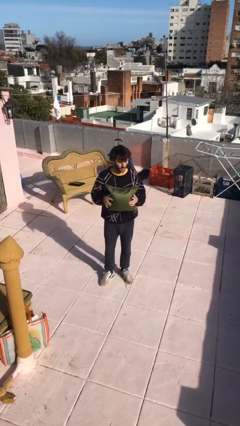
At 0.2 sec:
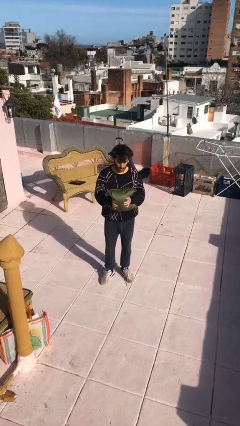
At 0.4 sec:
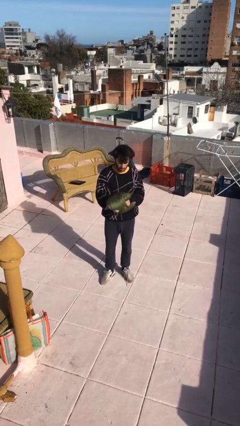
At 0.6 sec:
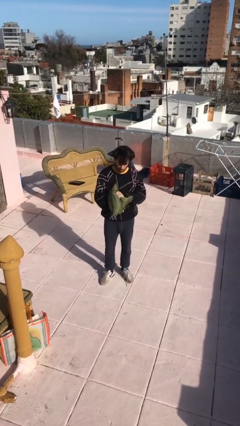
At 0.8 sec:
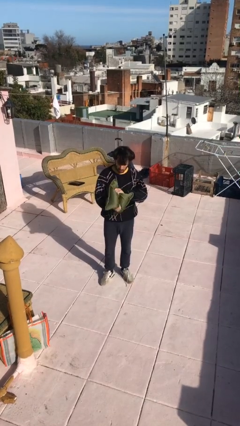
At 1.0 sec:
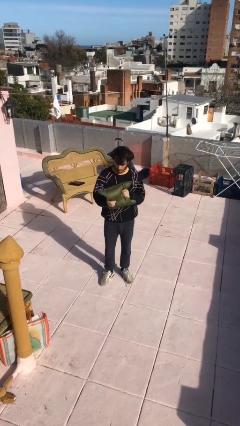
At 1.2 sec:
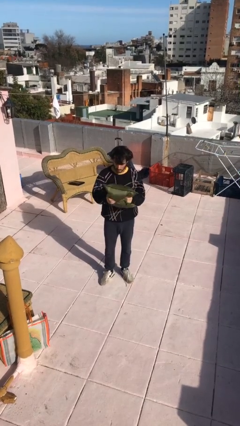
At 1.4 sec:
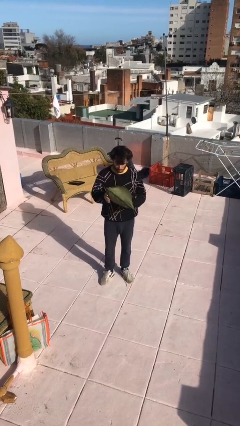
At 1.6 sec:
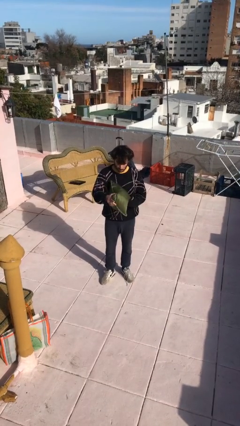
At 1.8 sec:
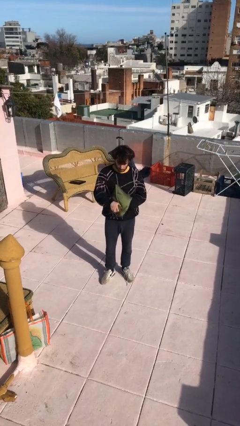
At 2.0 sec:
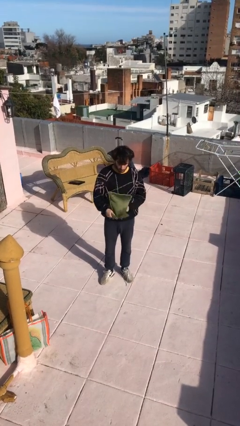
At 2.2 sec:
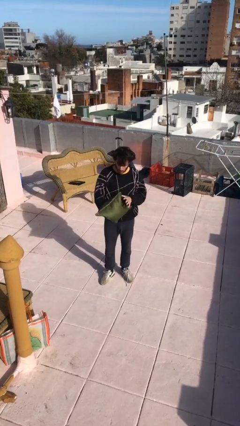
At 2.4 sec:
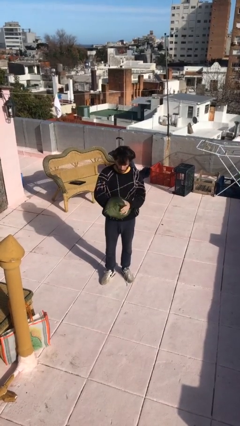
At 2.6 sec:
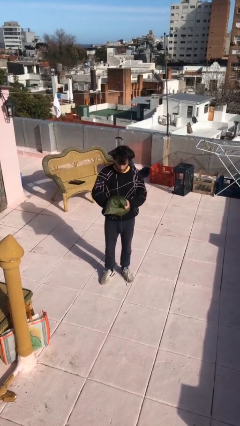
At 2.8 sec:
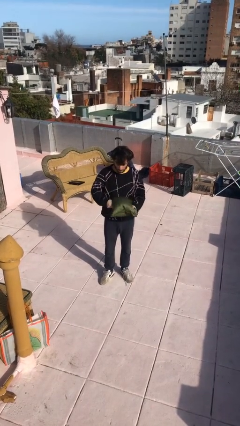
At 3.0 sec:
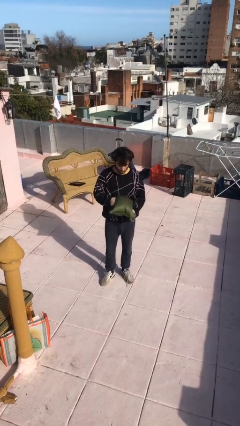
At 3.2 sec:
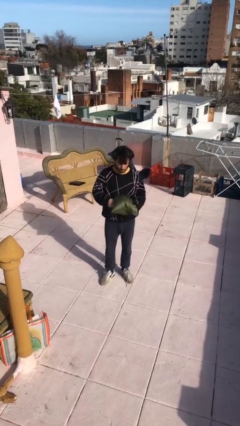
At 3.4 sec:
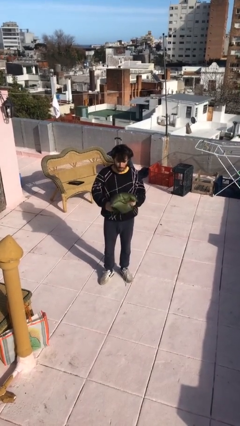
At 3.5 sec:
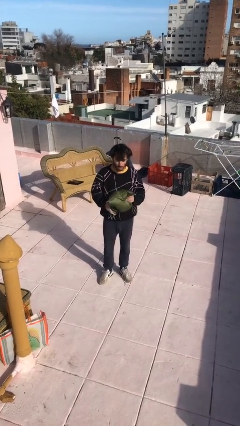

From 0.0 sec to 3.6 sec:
person squeezes object

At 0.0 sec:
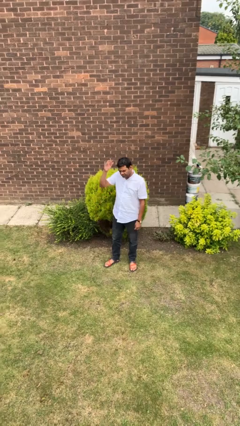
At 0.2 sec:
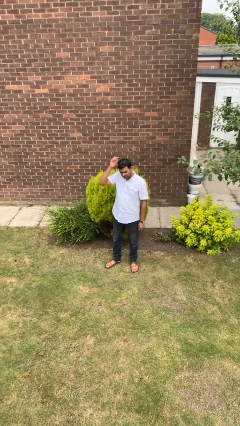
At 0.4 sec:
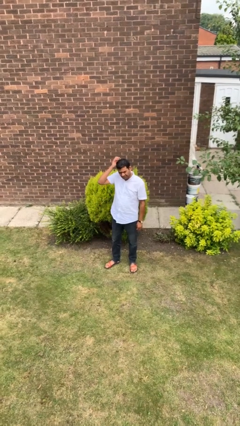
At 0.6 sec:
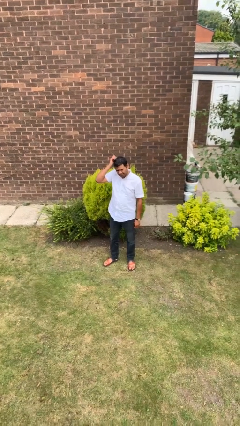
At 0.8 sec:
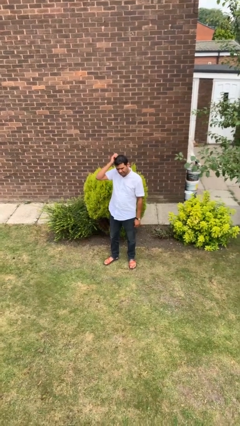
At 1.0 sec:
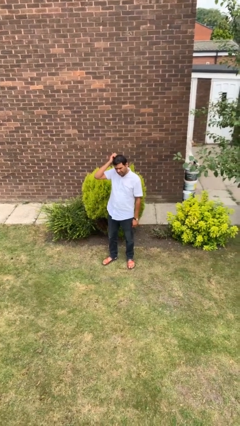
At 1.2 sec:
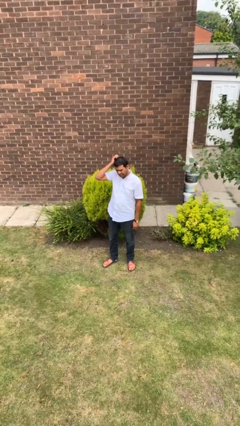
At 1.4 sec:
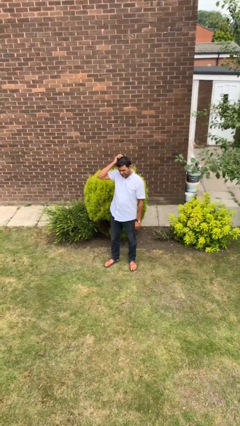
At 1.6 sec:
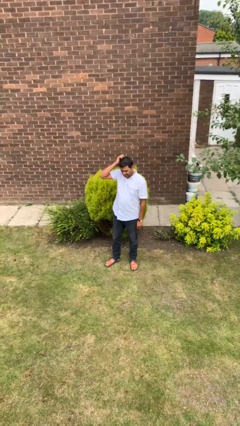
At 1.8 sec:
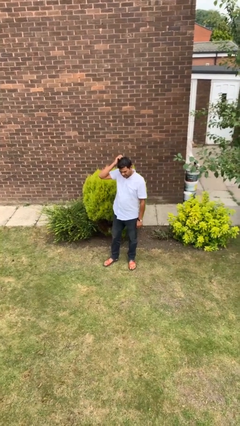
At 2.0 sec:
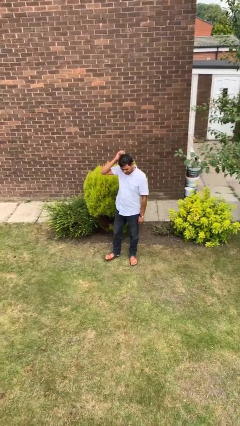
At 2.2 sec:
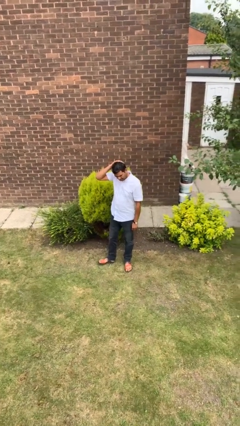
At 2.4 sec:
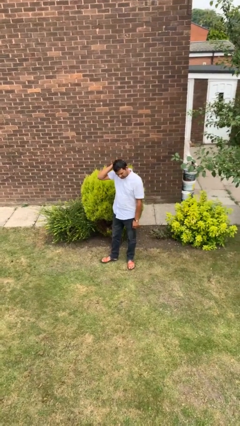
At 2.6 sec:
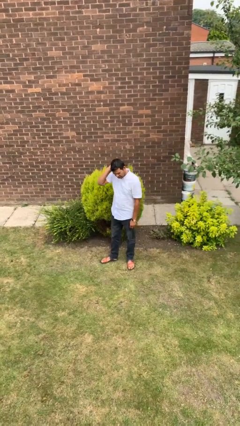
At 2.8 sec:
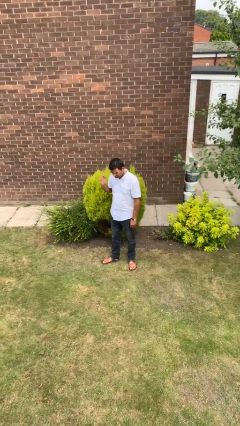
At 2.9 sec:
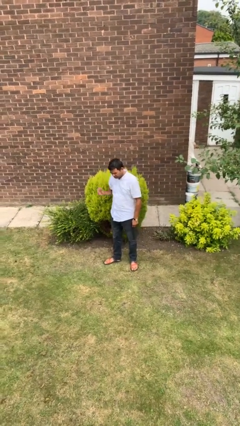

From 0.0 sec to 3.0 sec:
person scratches face

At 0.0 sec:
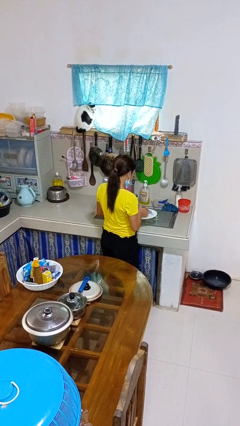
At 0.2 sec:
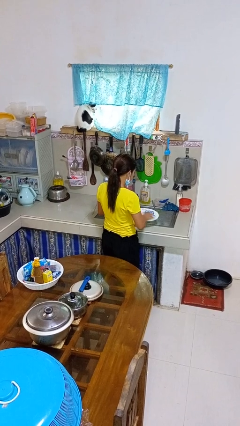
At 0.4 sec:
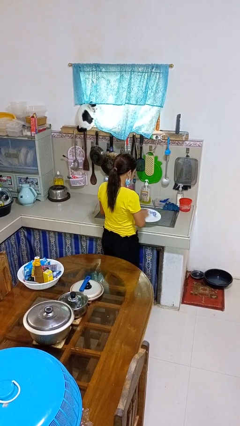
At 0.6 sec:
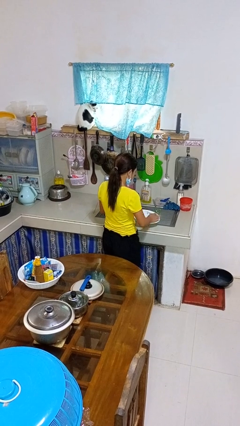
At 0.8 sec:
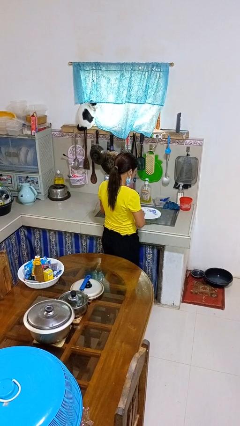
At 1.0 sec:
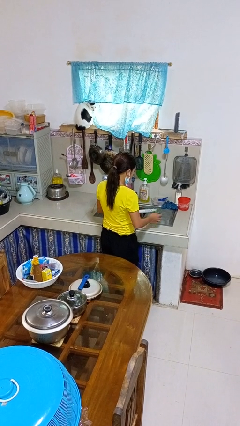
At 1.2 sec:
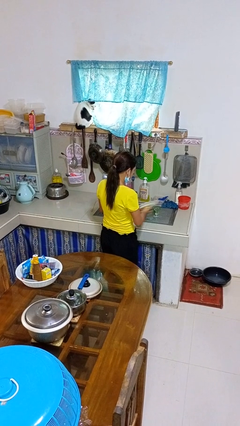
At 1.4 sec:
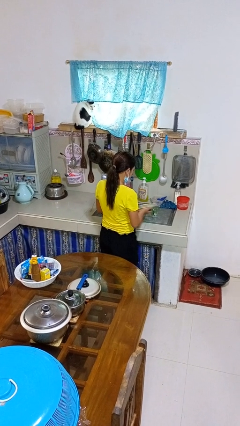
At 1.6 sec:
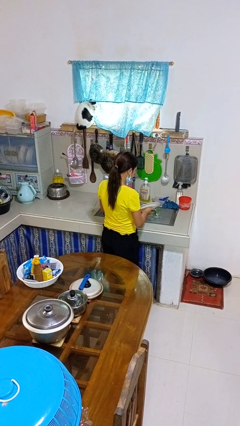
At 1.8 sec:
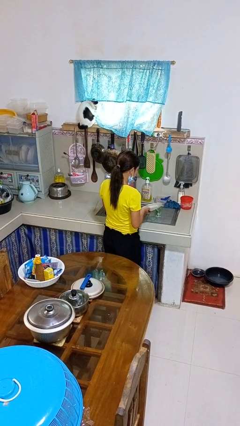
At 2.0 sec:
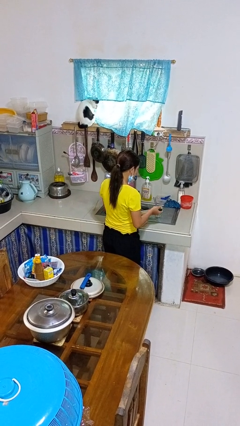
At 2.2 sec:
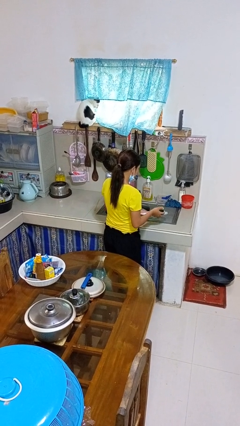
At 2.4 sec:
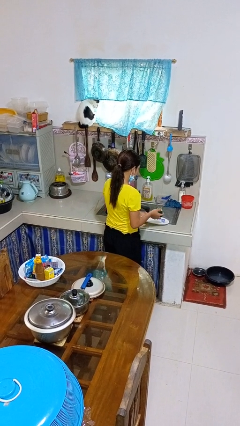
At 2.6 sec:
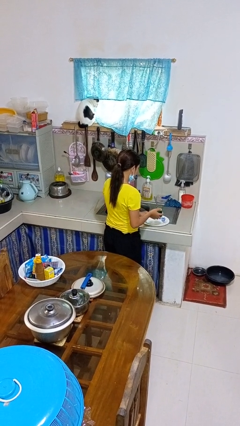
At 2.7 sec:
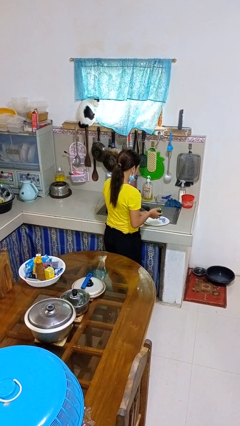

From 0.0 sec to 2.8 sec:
person washes dish

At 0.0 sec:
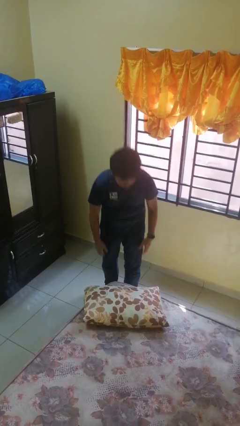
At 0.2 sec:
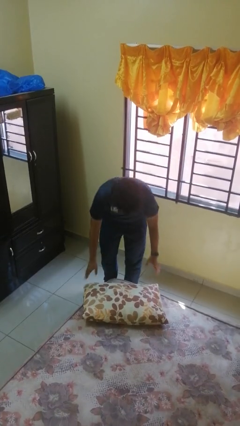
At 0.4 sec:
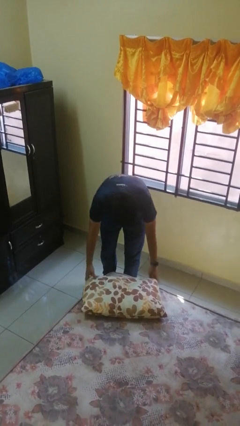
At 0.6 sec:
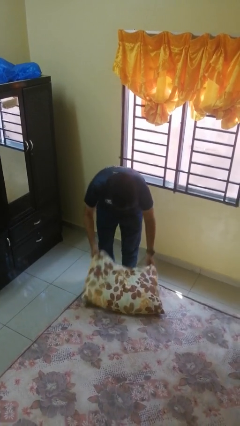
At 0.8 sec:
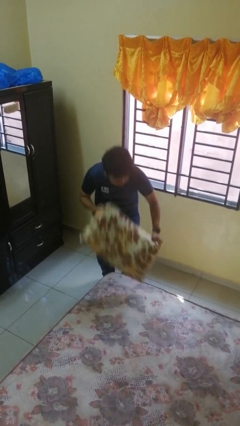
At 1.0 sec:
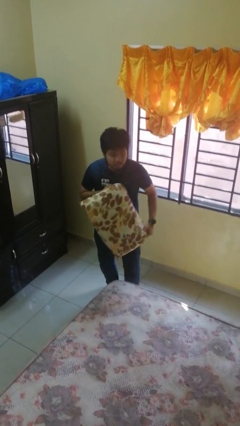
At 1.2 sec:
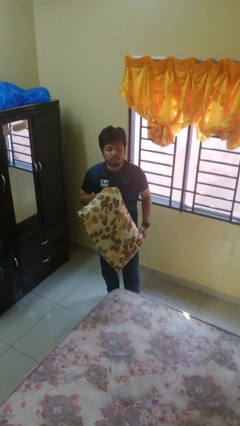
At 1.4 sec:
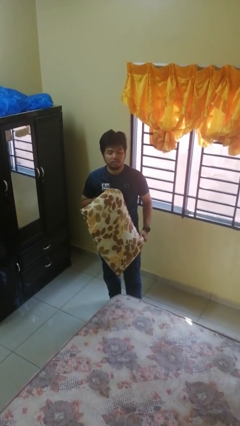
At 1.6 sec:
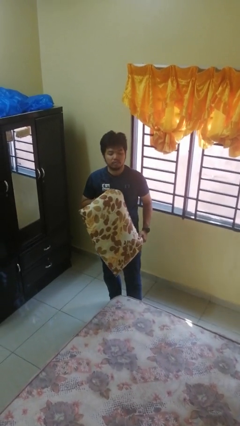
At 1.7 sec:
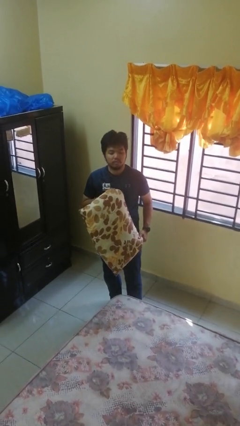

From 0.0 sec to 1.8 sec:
person picks up object from bed

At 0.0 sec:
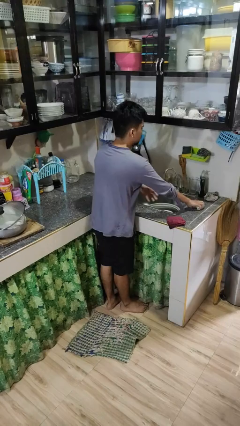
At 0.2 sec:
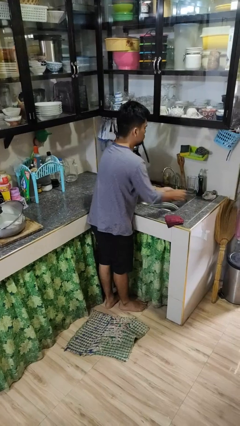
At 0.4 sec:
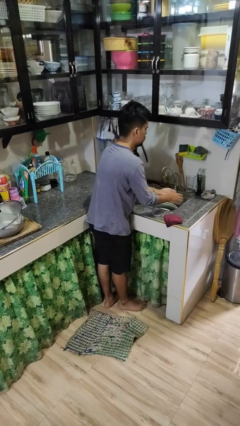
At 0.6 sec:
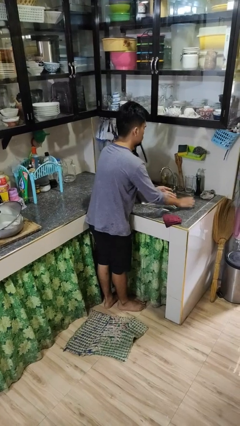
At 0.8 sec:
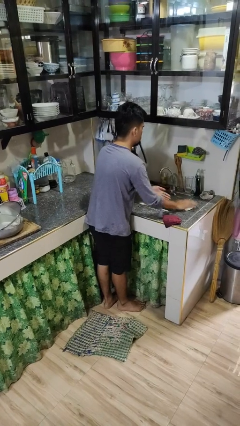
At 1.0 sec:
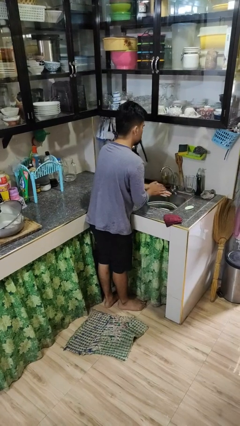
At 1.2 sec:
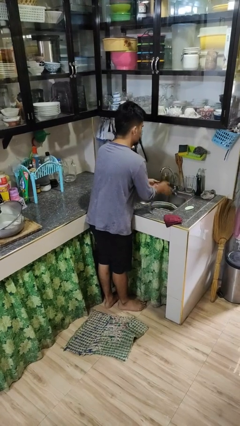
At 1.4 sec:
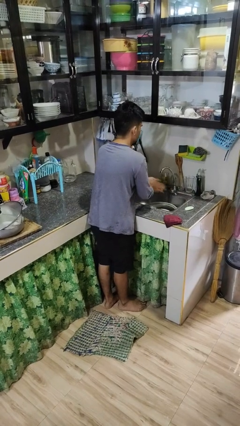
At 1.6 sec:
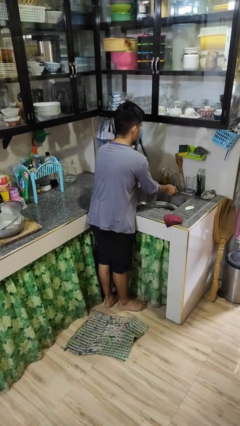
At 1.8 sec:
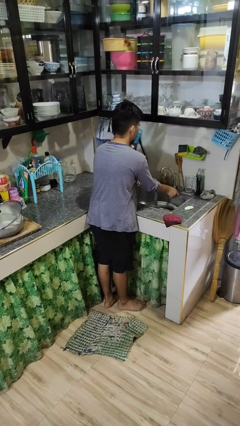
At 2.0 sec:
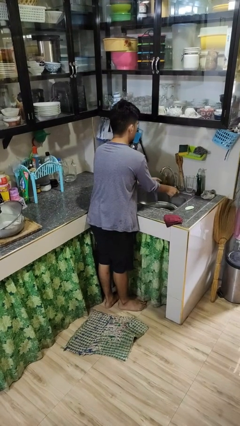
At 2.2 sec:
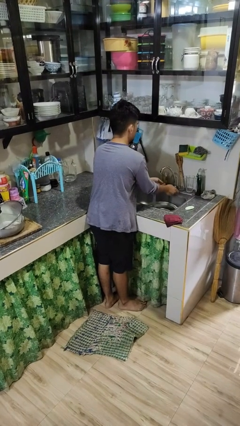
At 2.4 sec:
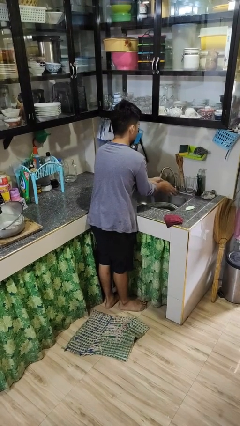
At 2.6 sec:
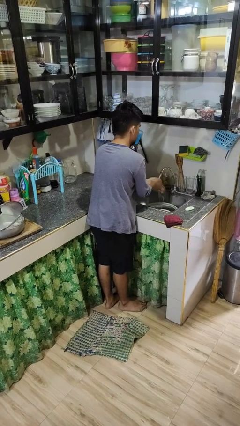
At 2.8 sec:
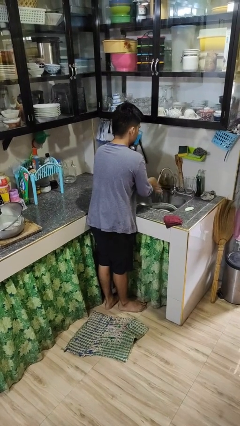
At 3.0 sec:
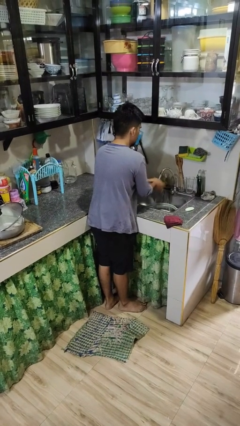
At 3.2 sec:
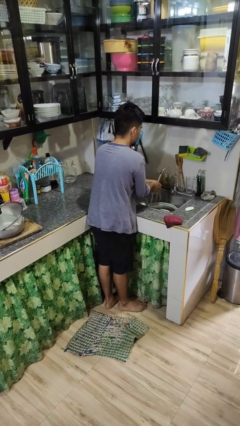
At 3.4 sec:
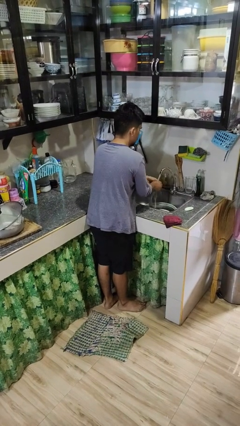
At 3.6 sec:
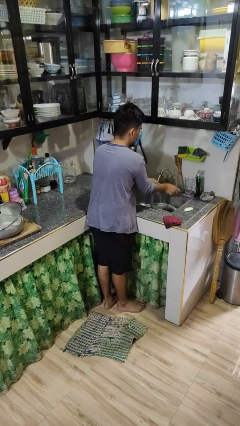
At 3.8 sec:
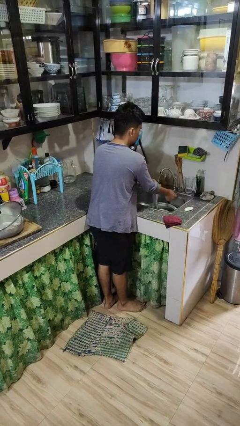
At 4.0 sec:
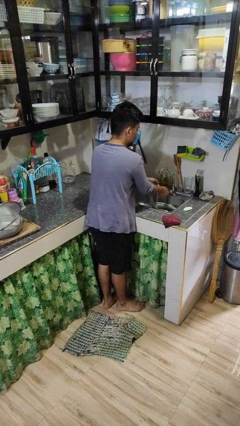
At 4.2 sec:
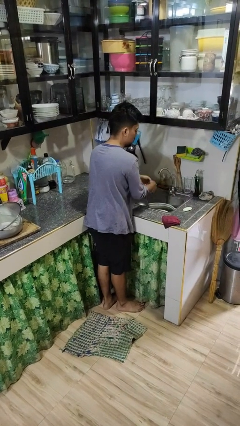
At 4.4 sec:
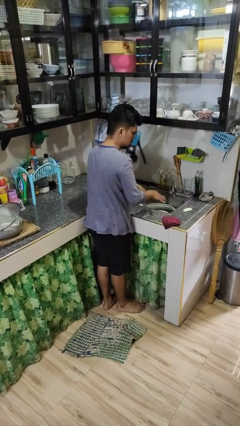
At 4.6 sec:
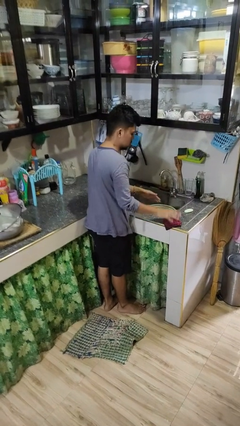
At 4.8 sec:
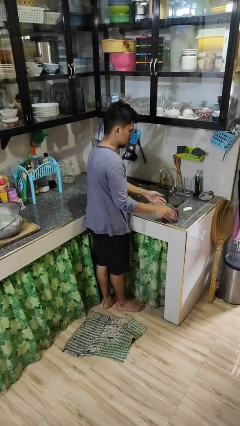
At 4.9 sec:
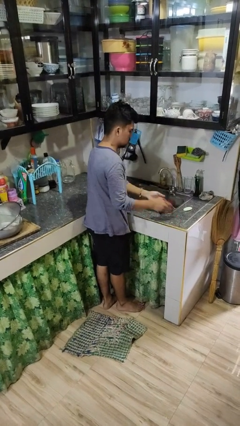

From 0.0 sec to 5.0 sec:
person washes hands

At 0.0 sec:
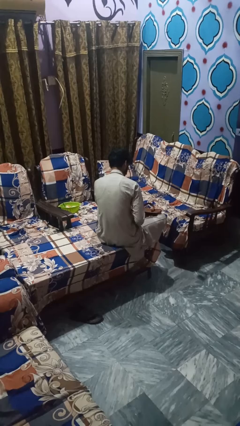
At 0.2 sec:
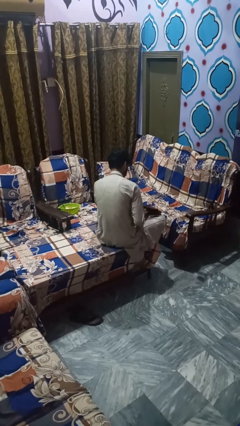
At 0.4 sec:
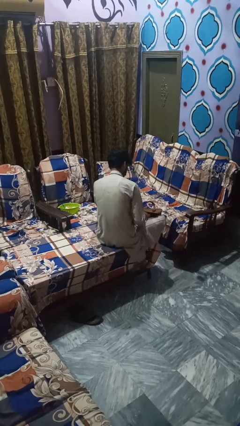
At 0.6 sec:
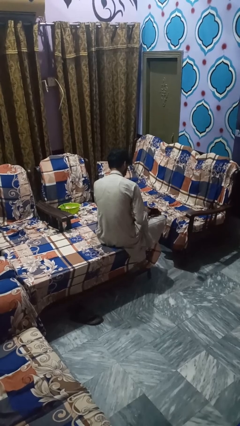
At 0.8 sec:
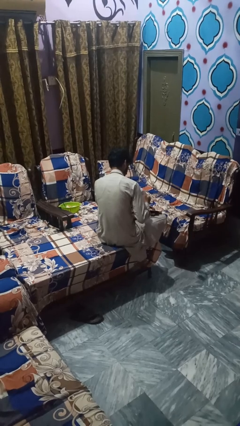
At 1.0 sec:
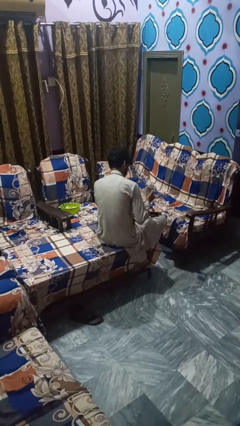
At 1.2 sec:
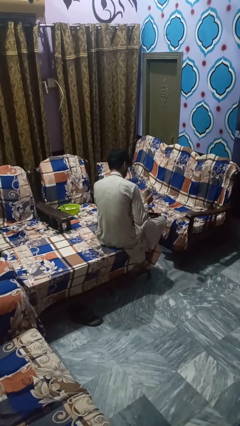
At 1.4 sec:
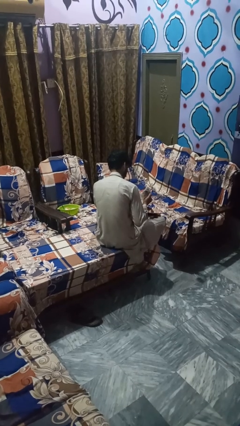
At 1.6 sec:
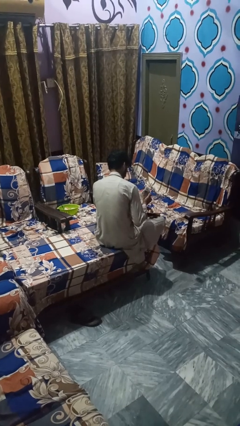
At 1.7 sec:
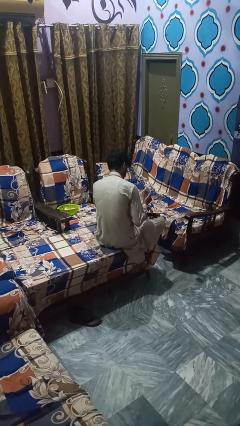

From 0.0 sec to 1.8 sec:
person takes object from bag
